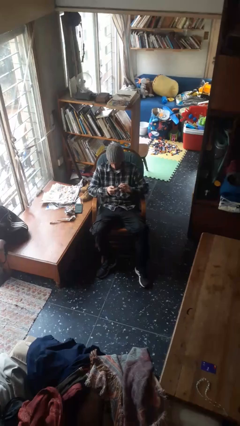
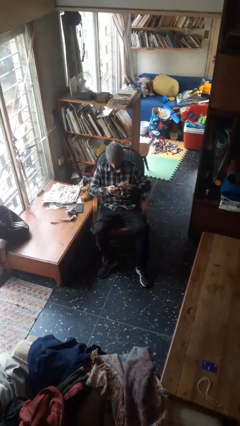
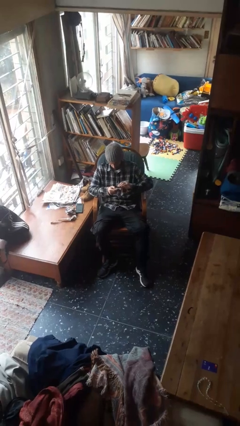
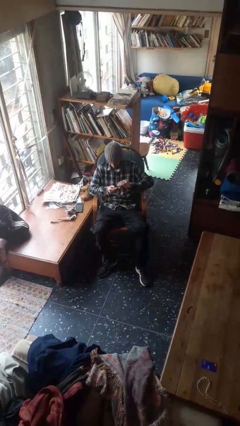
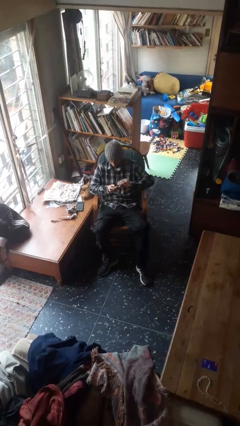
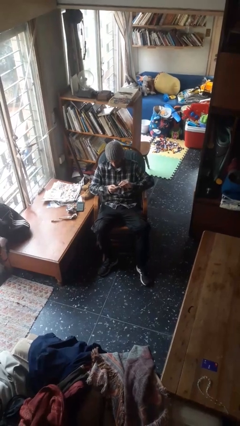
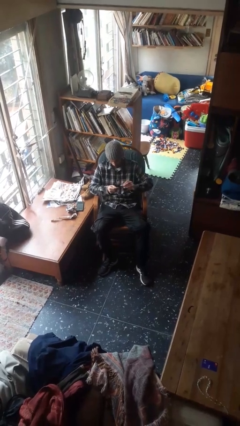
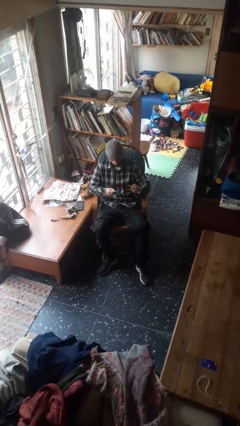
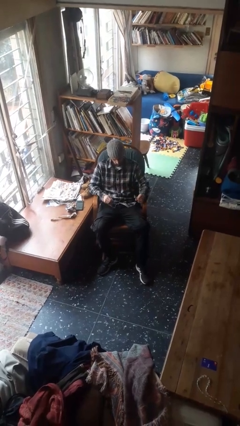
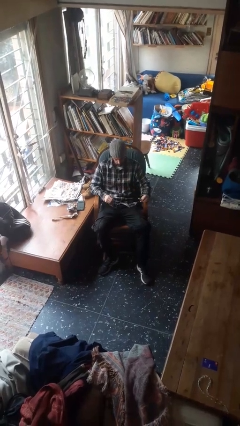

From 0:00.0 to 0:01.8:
person clips fingernails

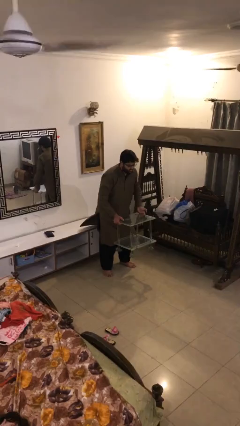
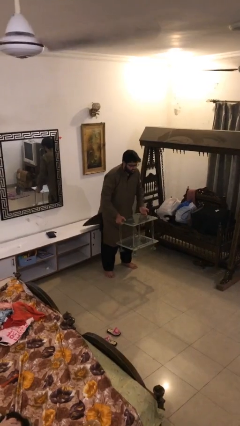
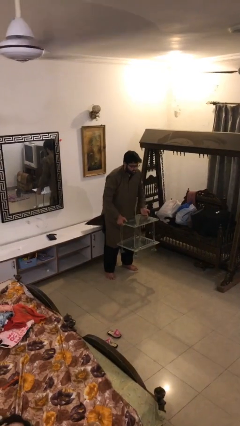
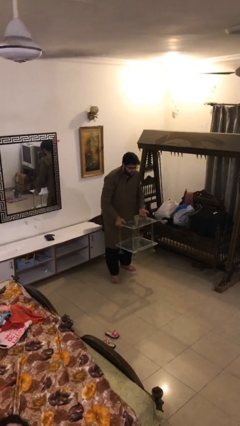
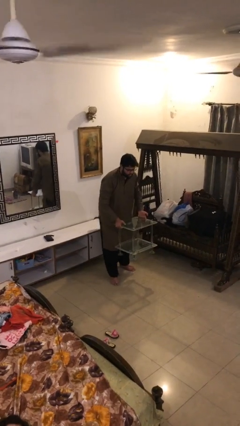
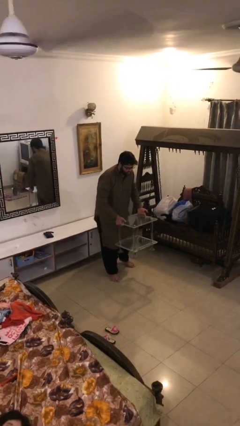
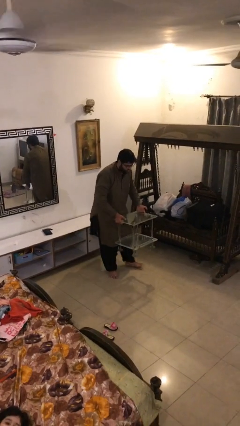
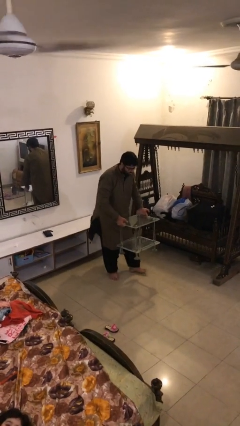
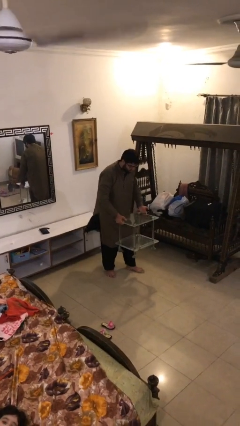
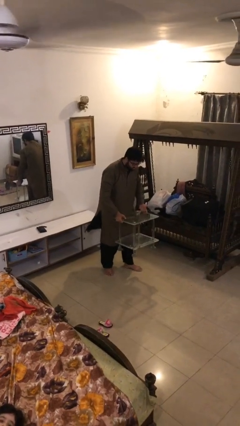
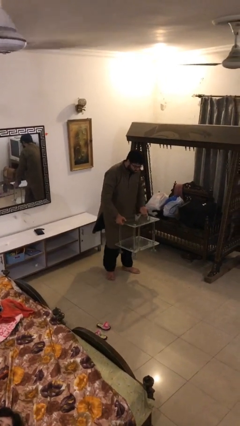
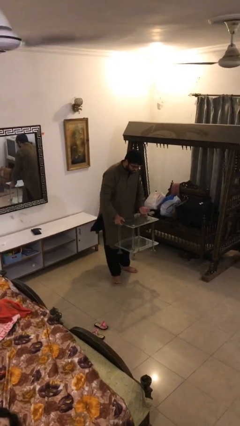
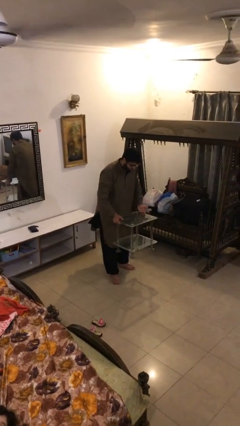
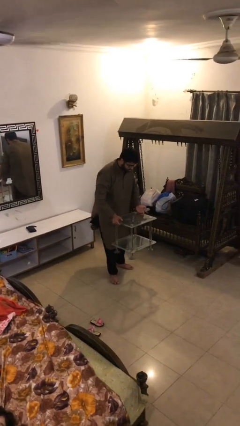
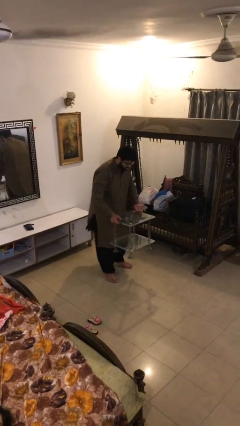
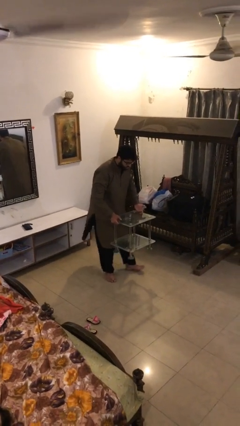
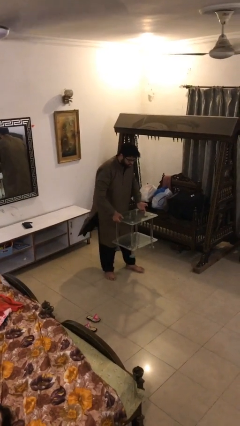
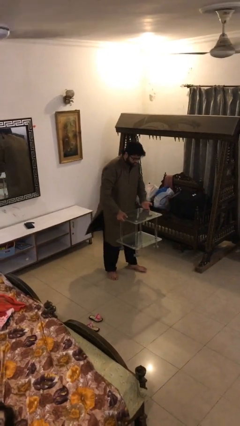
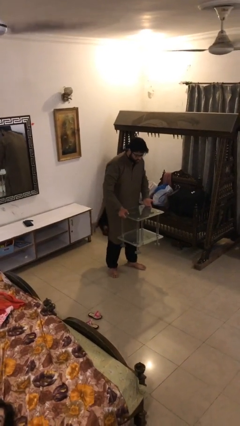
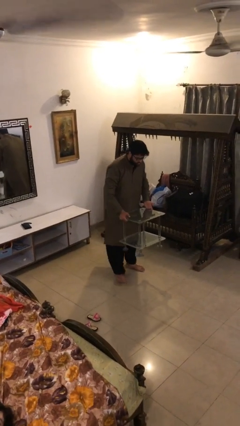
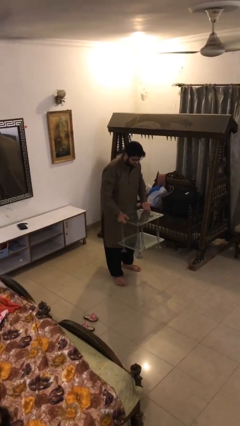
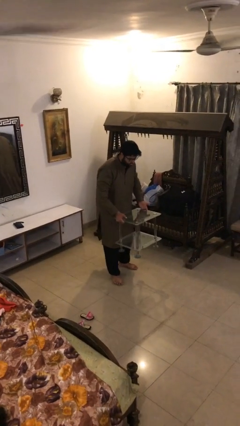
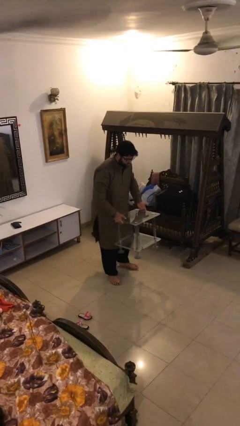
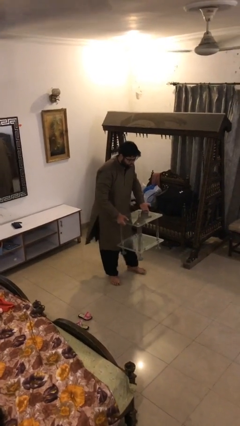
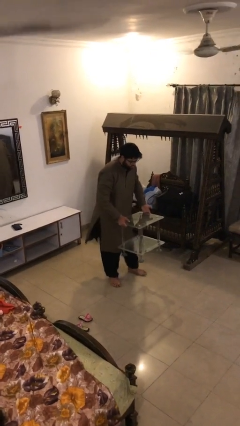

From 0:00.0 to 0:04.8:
person carries heavy object

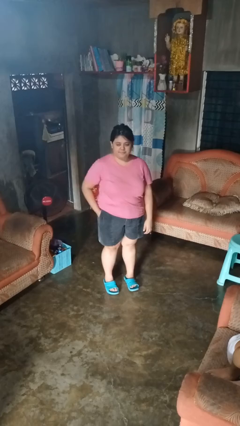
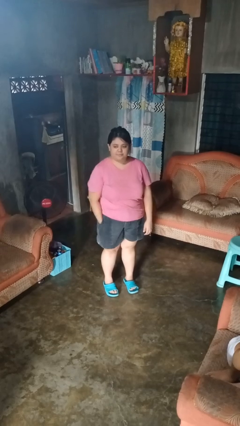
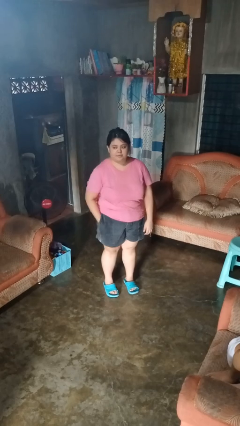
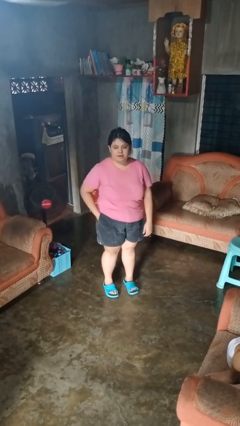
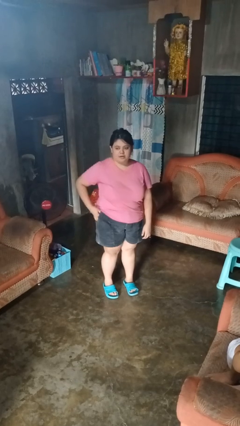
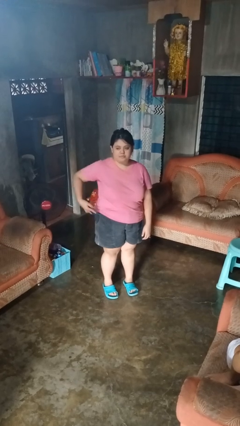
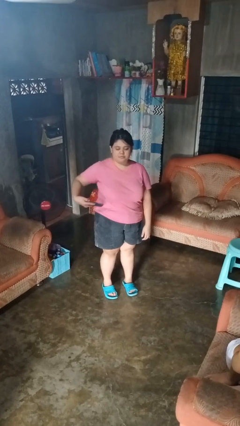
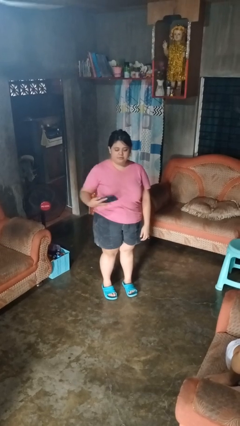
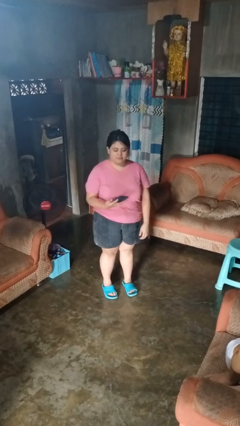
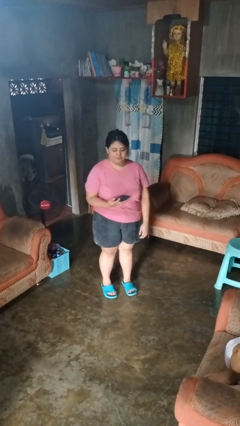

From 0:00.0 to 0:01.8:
person takes phone from pocket

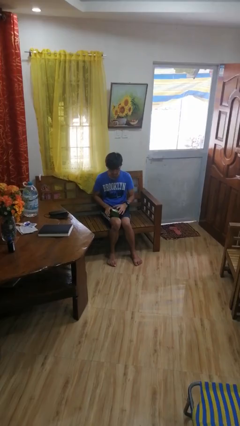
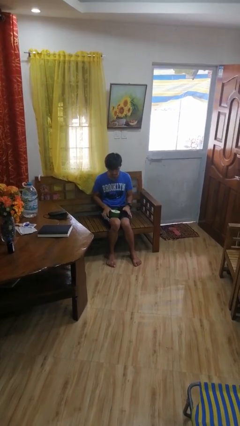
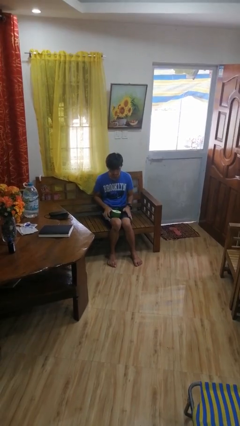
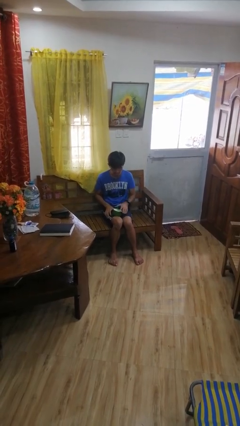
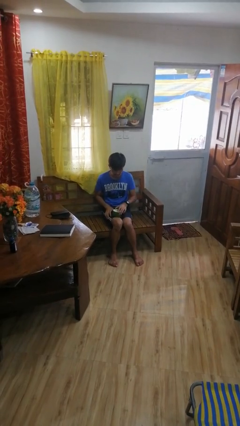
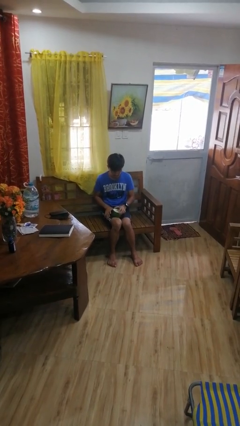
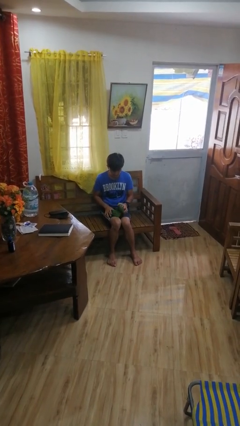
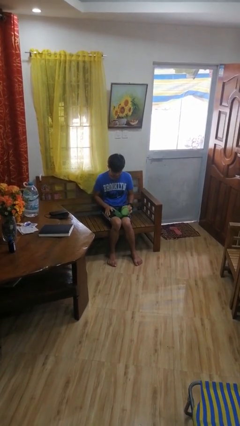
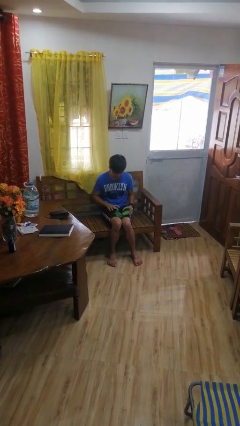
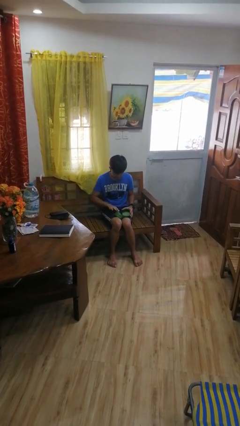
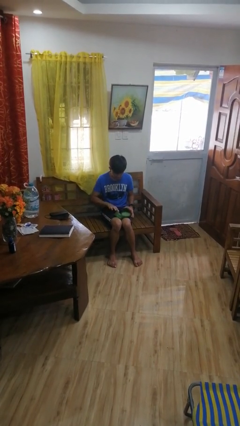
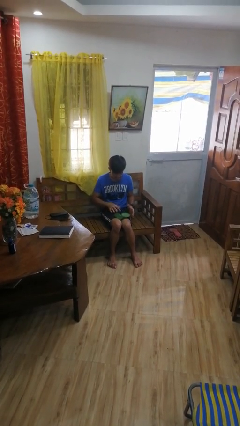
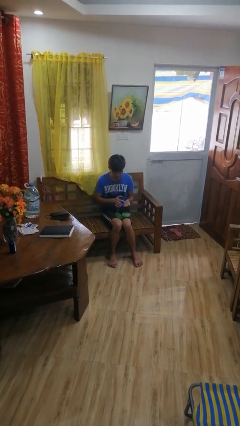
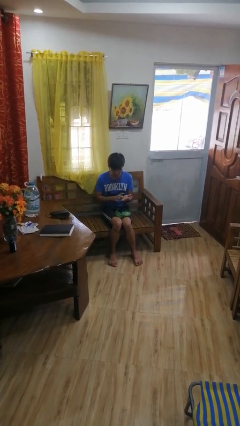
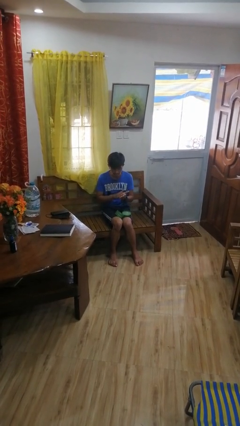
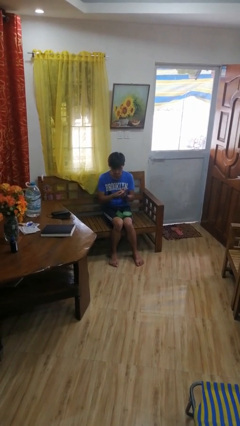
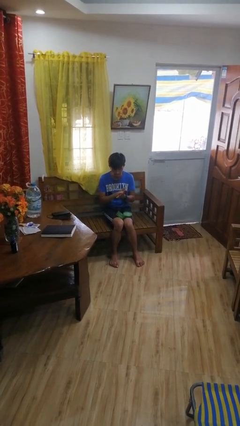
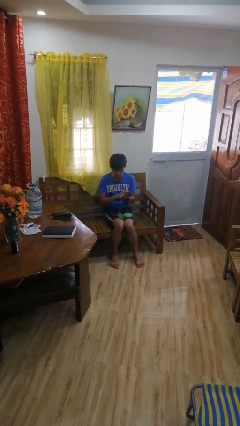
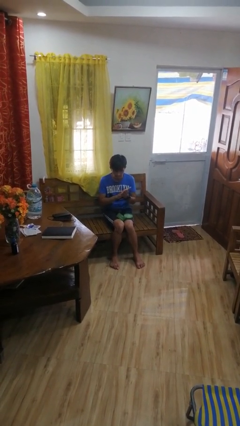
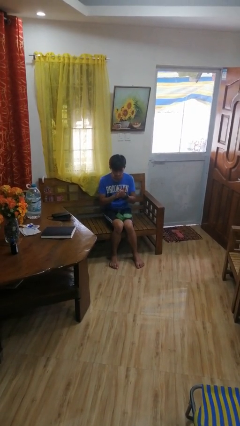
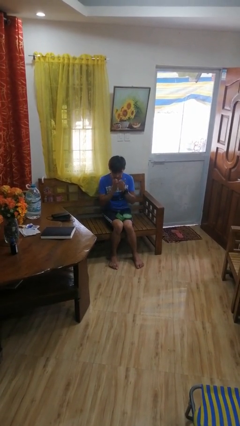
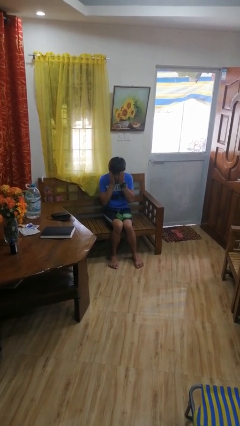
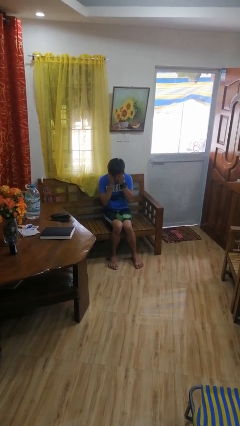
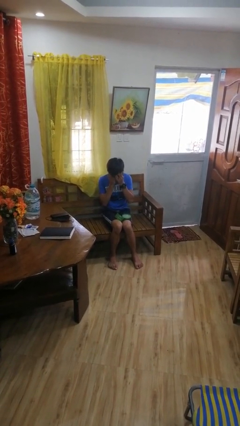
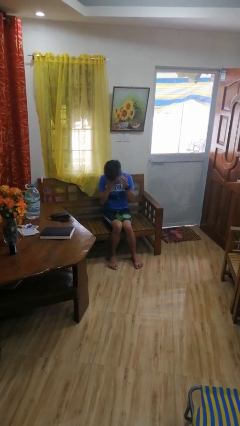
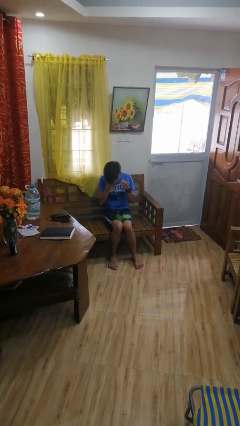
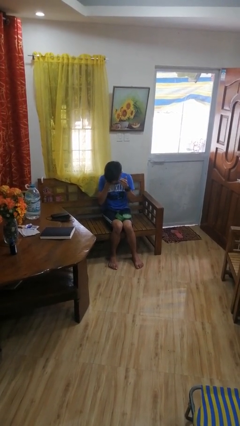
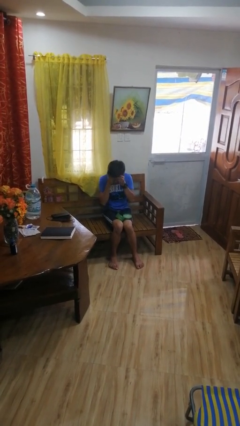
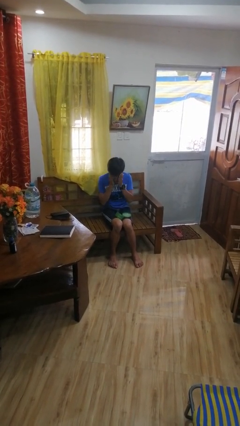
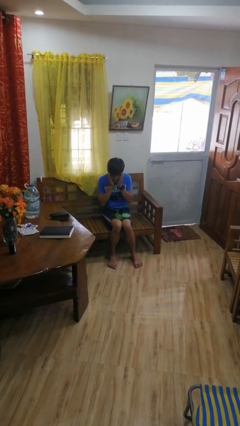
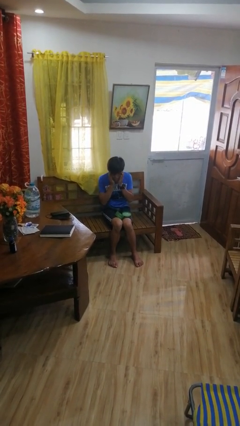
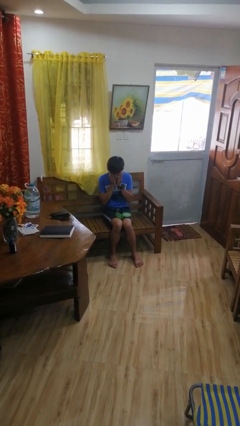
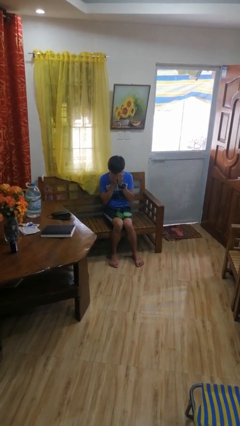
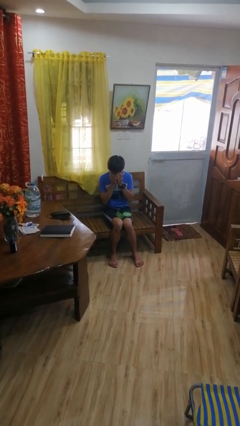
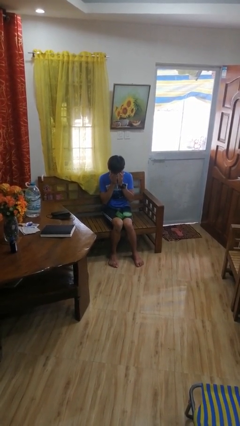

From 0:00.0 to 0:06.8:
person applies facial moisturizer

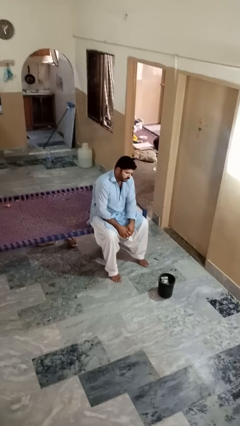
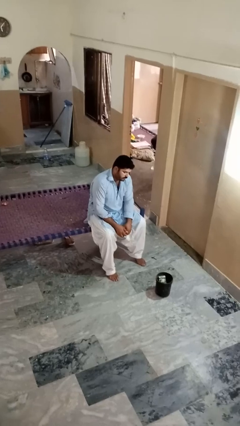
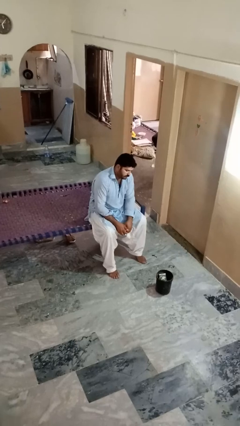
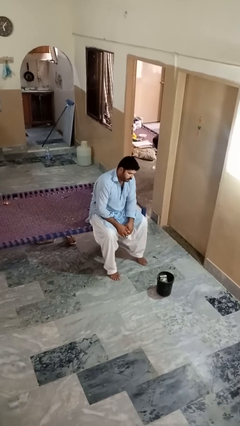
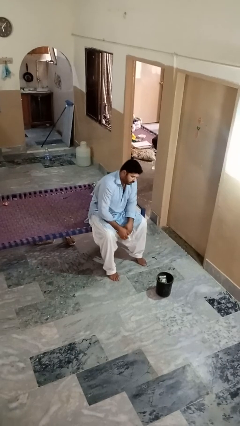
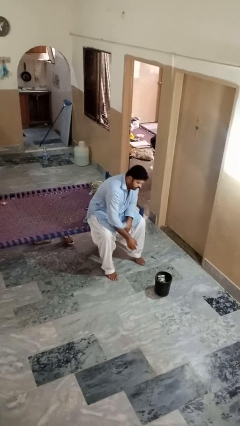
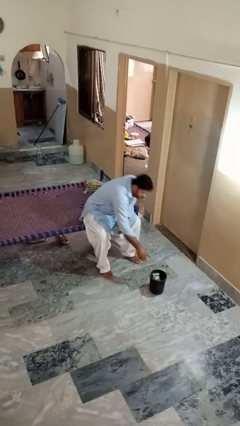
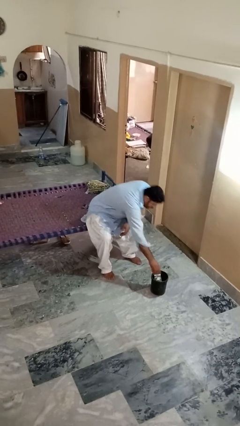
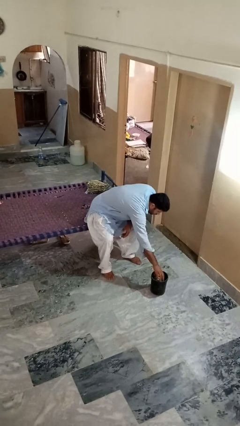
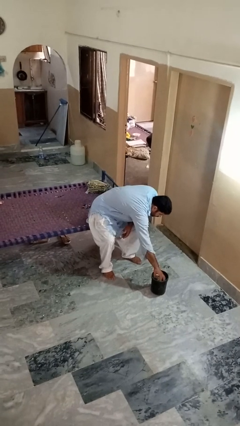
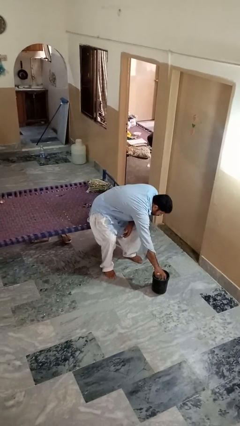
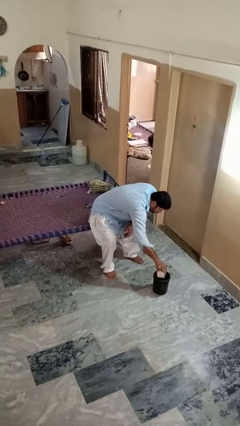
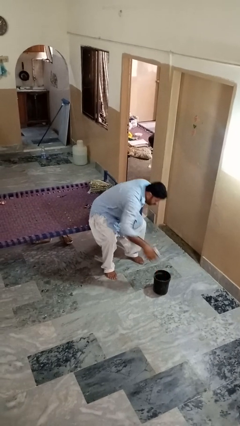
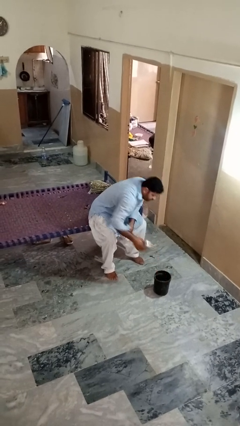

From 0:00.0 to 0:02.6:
person takes object from basket
